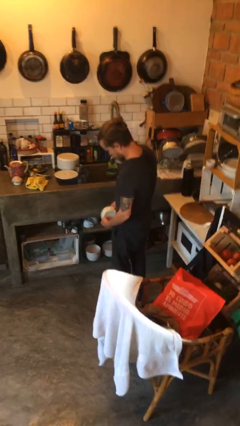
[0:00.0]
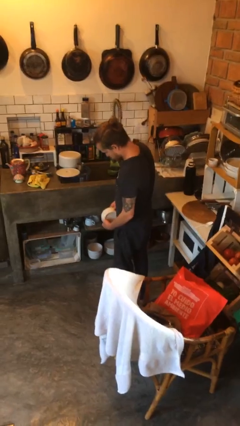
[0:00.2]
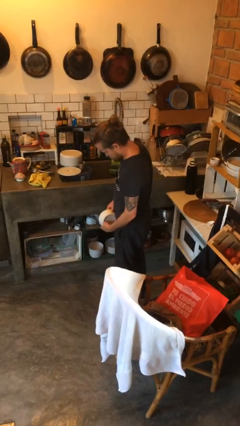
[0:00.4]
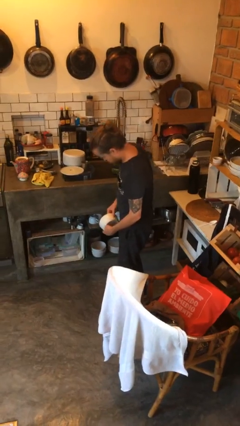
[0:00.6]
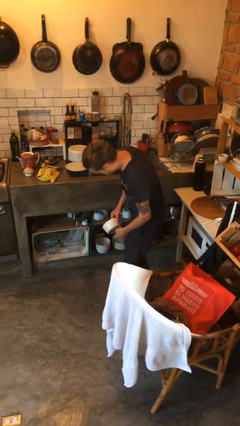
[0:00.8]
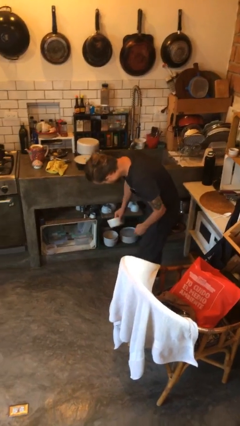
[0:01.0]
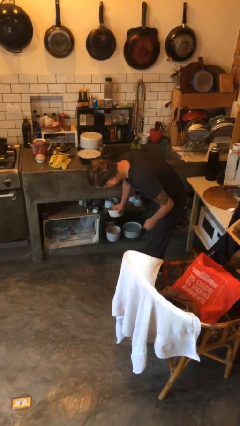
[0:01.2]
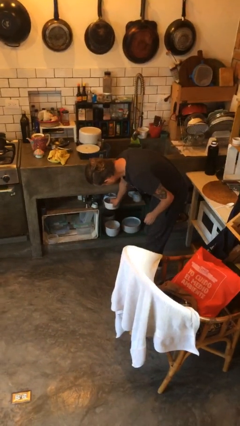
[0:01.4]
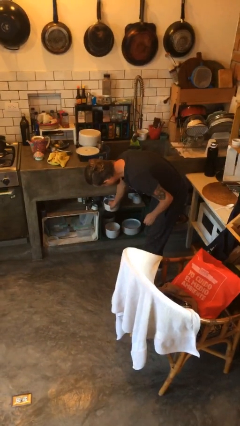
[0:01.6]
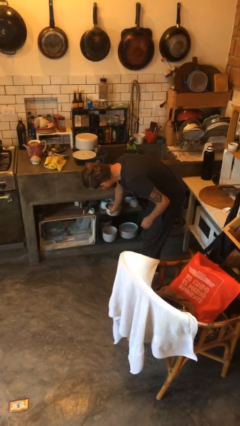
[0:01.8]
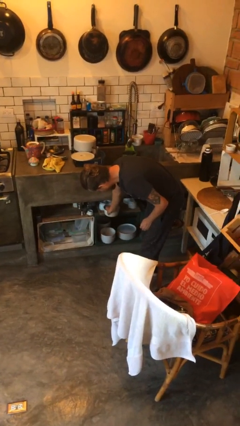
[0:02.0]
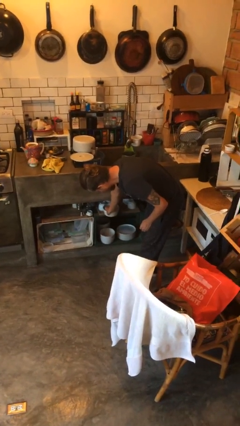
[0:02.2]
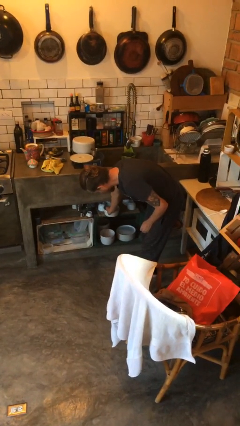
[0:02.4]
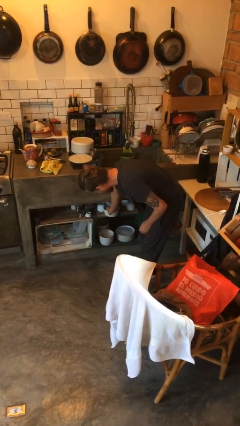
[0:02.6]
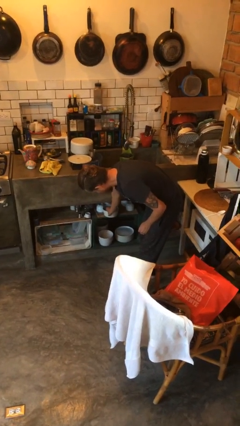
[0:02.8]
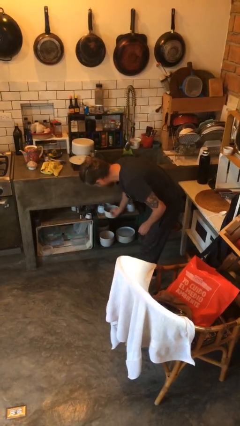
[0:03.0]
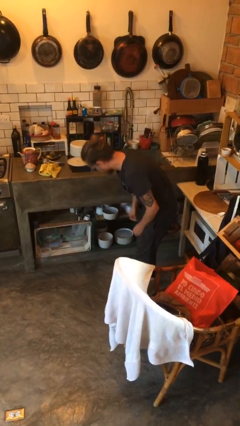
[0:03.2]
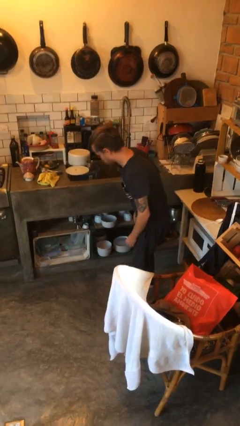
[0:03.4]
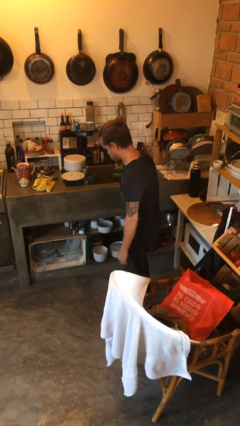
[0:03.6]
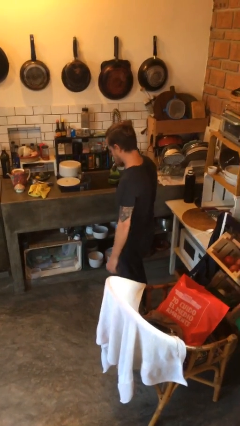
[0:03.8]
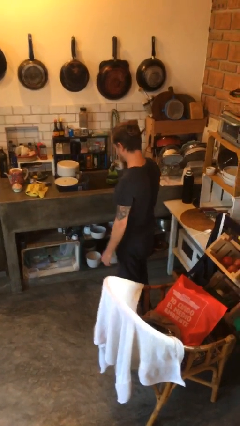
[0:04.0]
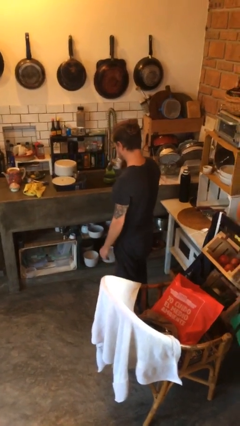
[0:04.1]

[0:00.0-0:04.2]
person puts down object into cabinet

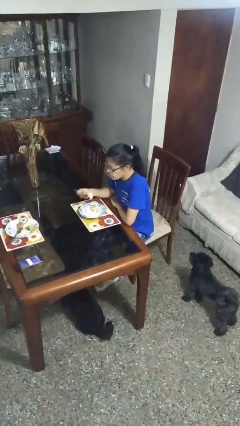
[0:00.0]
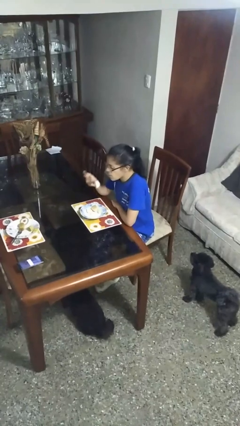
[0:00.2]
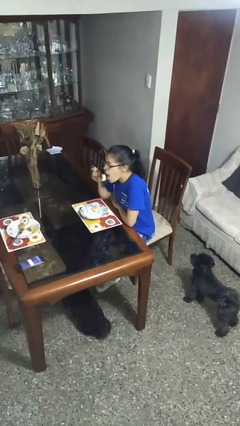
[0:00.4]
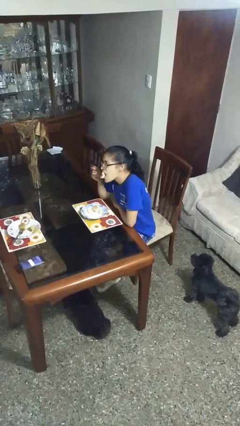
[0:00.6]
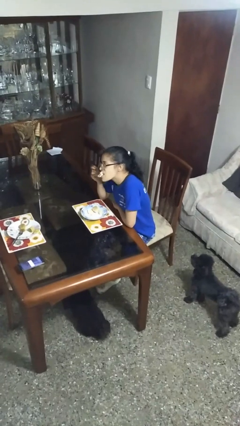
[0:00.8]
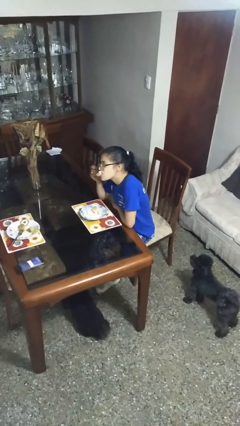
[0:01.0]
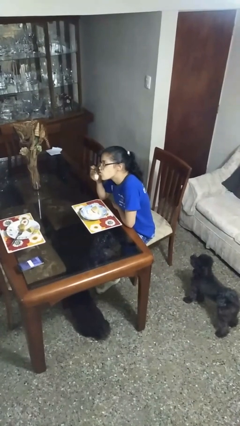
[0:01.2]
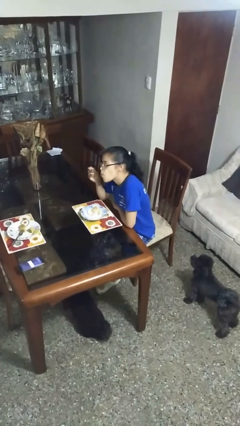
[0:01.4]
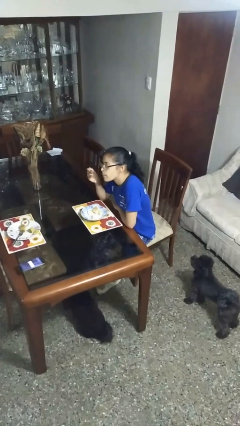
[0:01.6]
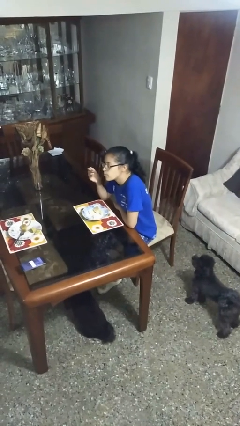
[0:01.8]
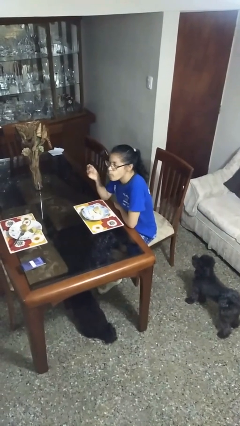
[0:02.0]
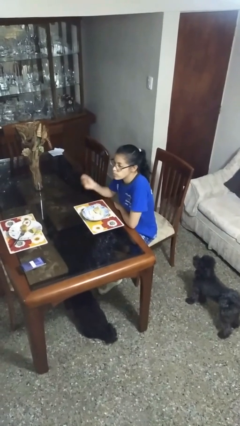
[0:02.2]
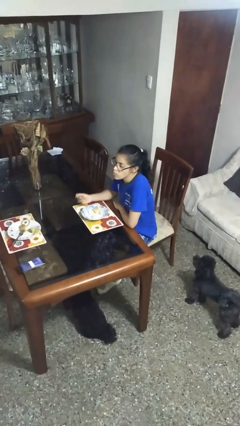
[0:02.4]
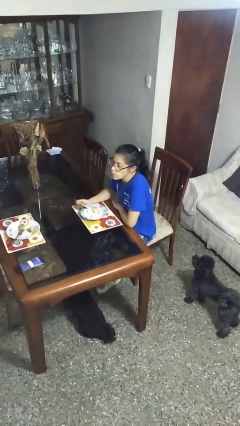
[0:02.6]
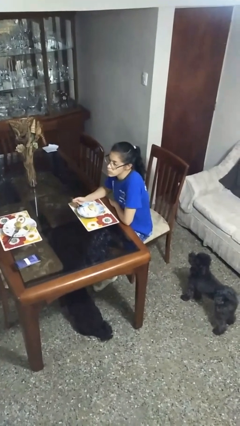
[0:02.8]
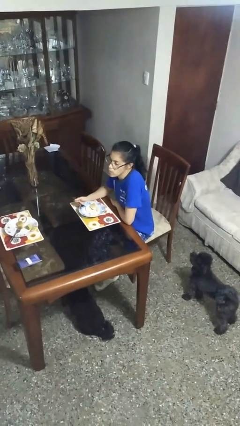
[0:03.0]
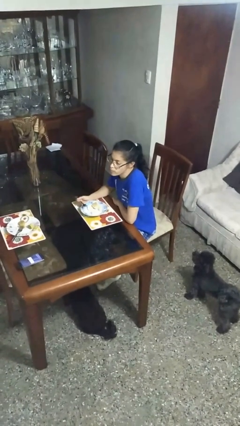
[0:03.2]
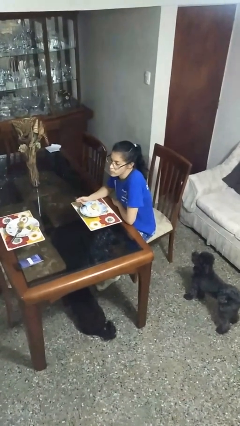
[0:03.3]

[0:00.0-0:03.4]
person eats with utensil

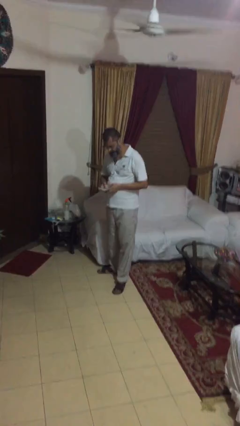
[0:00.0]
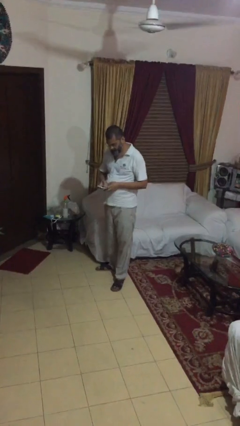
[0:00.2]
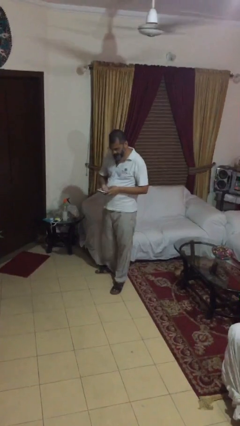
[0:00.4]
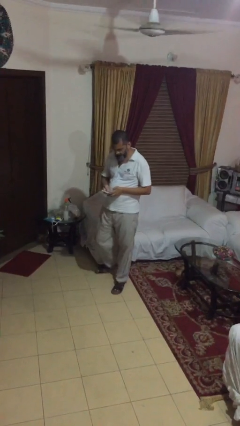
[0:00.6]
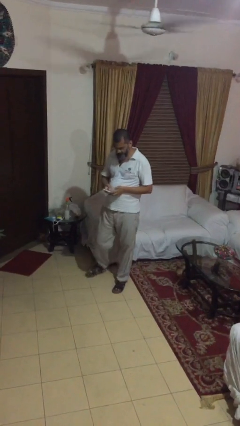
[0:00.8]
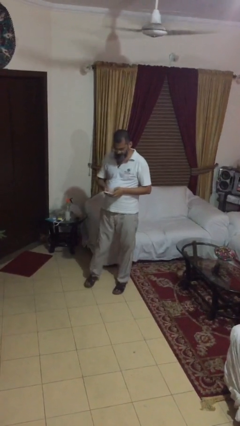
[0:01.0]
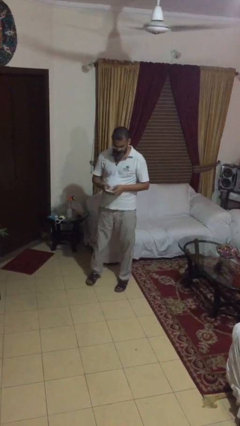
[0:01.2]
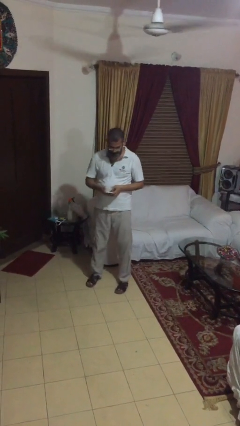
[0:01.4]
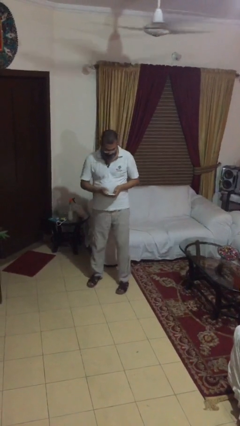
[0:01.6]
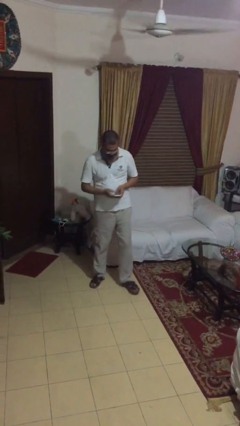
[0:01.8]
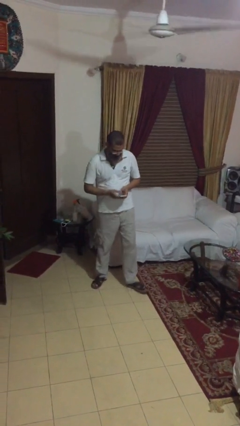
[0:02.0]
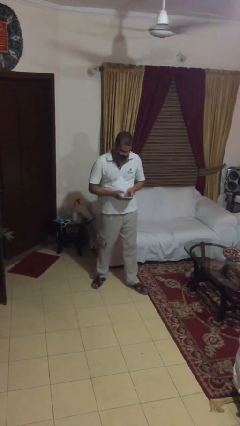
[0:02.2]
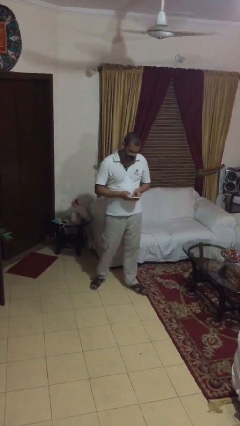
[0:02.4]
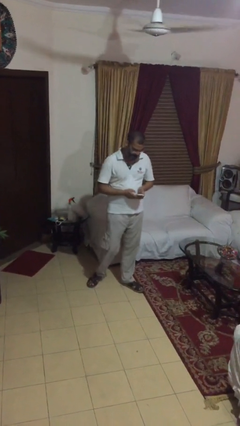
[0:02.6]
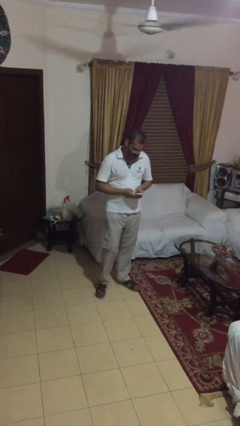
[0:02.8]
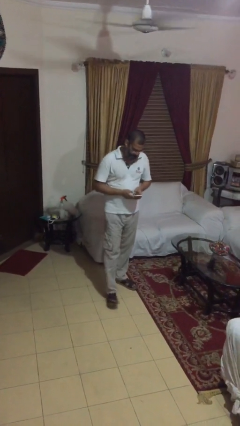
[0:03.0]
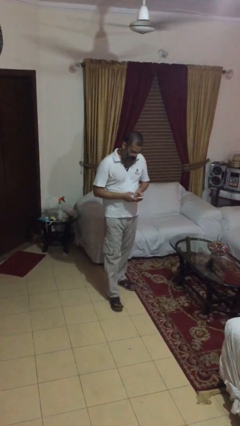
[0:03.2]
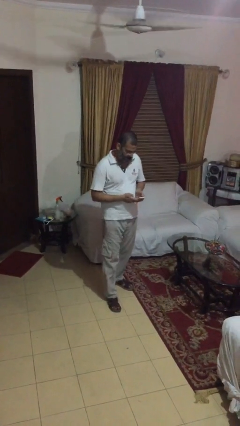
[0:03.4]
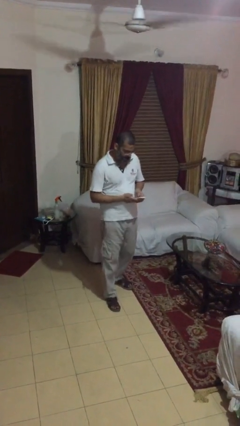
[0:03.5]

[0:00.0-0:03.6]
person texts on phone

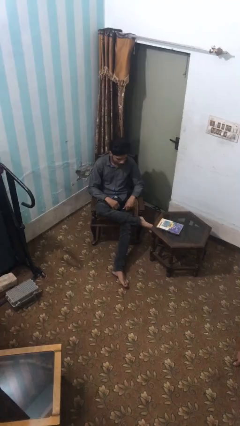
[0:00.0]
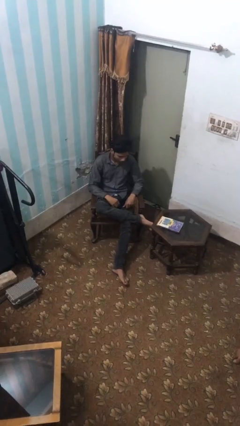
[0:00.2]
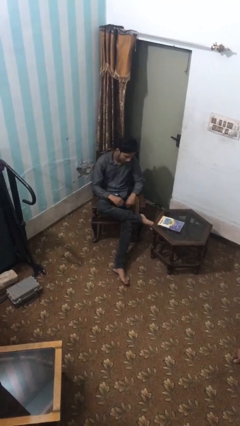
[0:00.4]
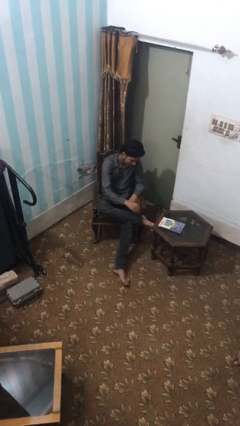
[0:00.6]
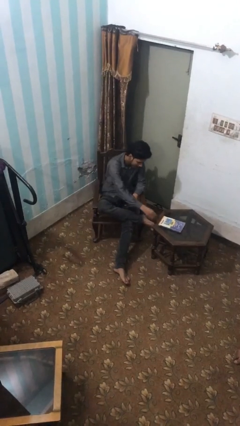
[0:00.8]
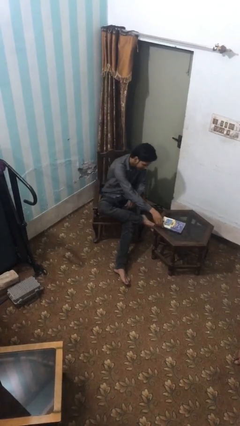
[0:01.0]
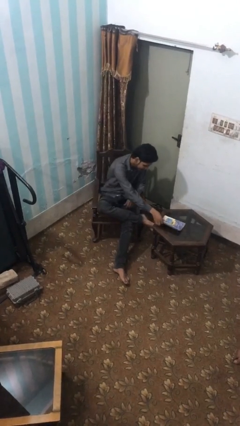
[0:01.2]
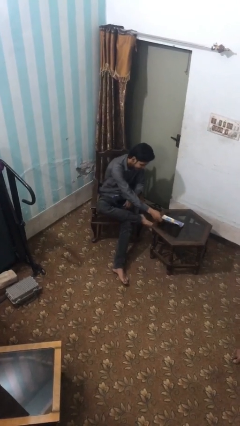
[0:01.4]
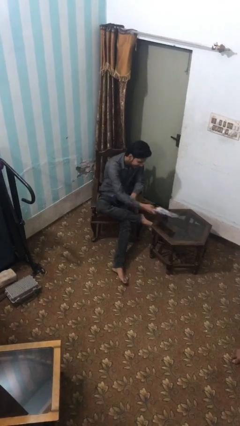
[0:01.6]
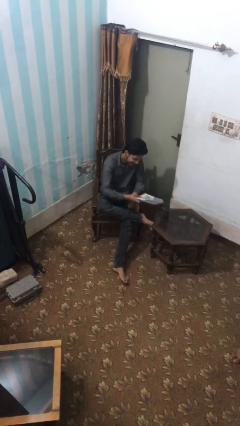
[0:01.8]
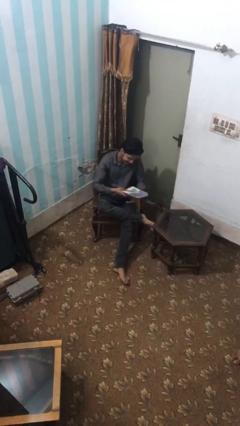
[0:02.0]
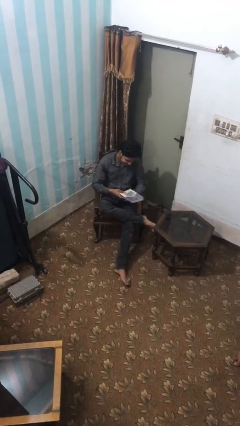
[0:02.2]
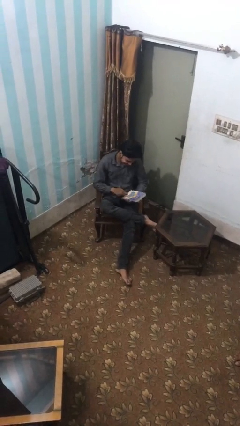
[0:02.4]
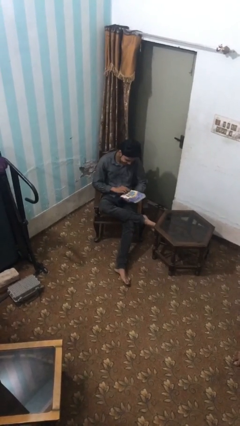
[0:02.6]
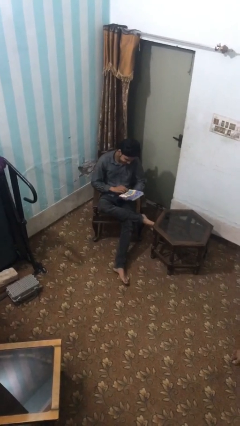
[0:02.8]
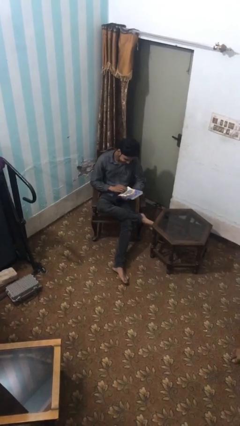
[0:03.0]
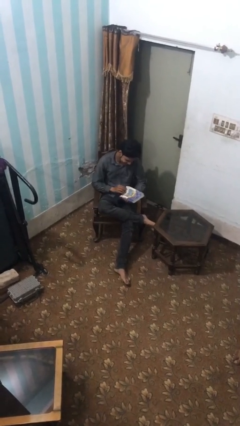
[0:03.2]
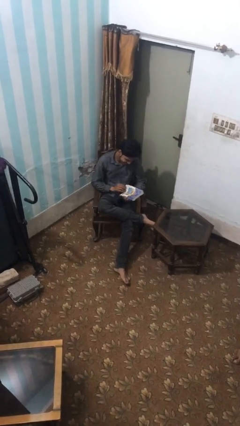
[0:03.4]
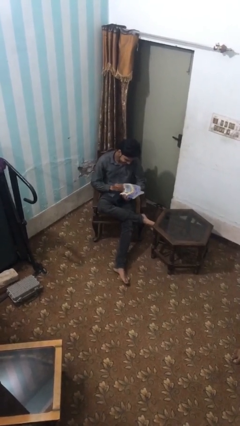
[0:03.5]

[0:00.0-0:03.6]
person picks up object from table

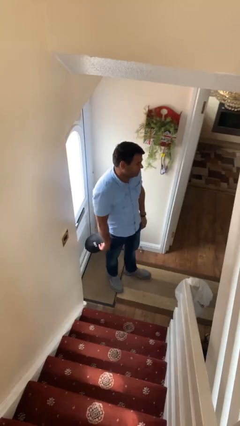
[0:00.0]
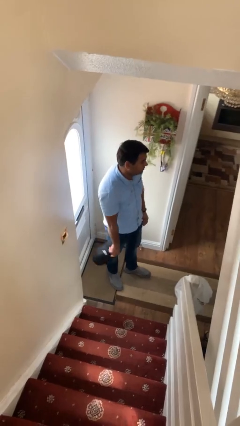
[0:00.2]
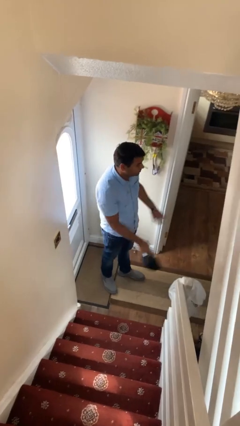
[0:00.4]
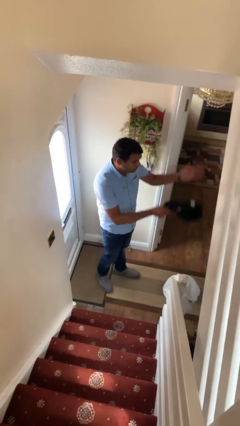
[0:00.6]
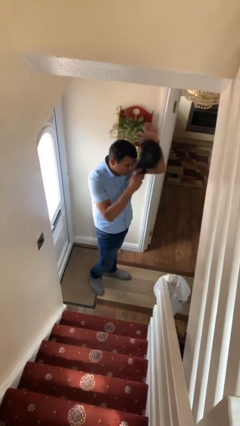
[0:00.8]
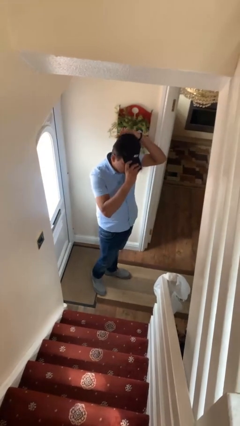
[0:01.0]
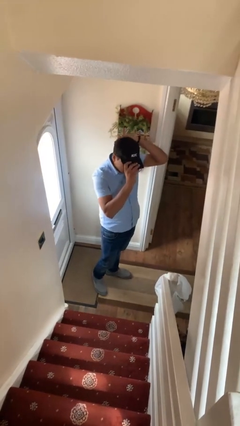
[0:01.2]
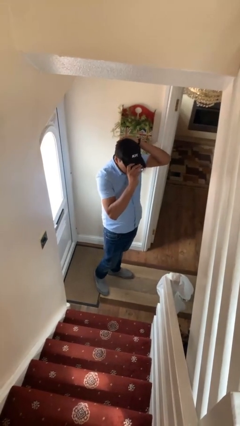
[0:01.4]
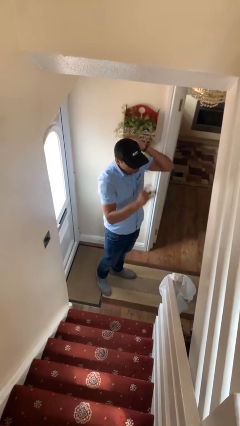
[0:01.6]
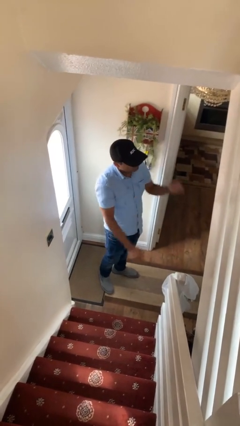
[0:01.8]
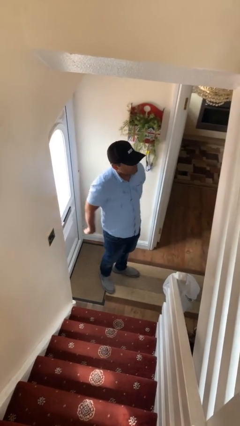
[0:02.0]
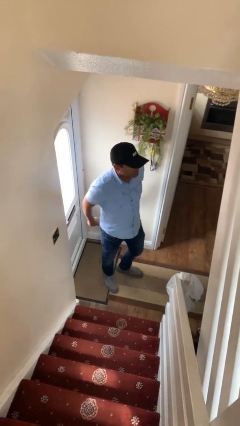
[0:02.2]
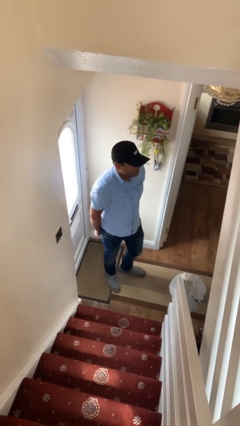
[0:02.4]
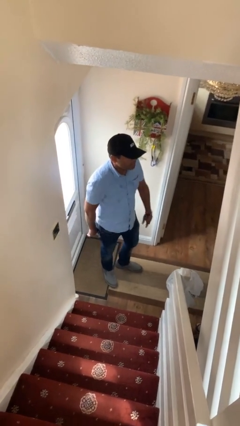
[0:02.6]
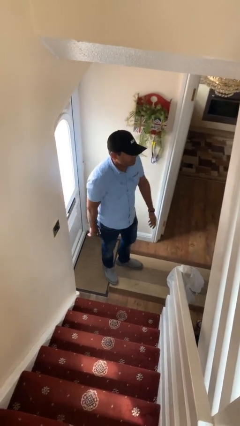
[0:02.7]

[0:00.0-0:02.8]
person puts on hat

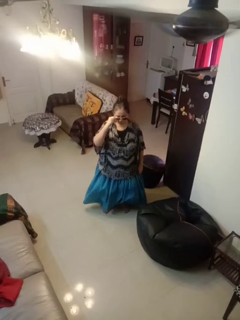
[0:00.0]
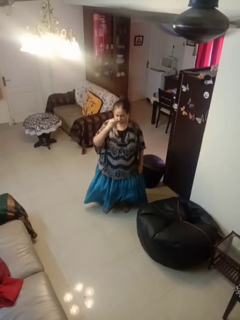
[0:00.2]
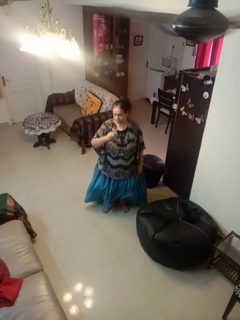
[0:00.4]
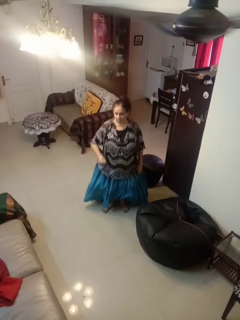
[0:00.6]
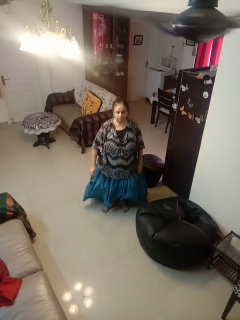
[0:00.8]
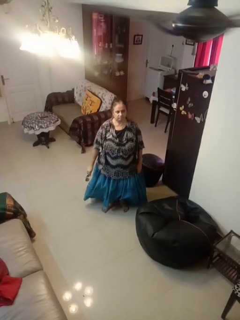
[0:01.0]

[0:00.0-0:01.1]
person takes off sunglasses
